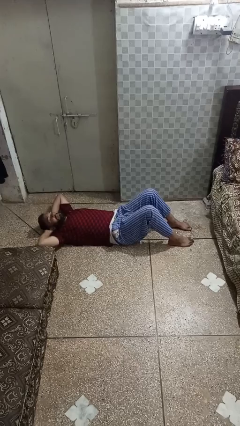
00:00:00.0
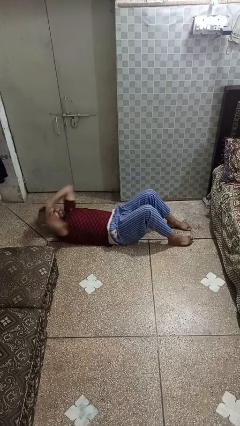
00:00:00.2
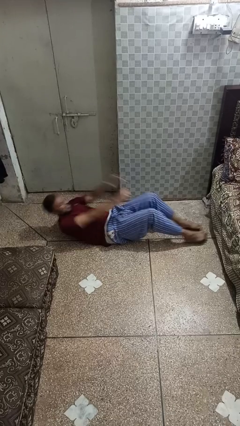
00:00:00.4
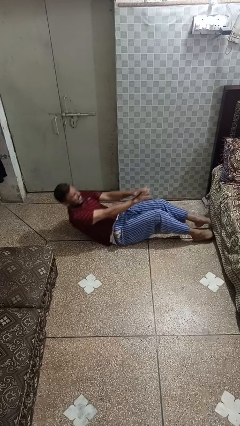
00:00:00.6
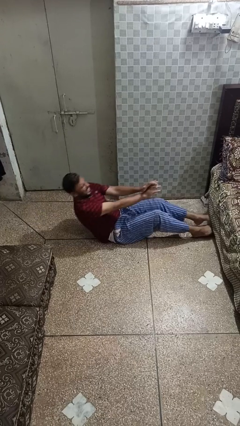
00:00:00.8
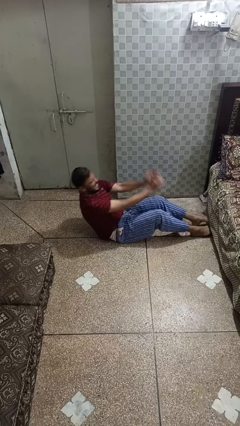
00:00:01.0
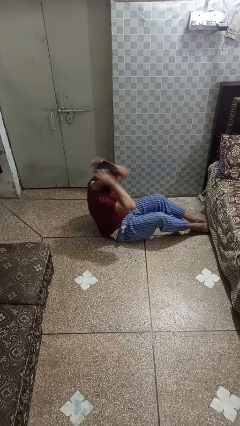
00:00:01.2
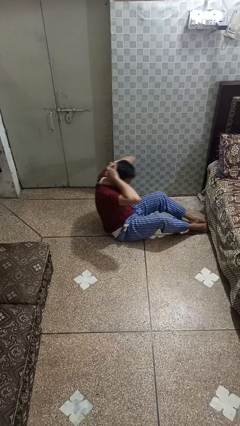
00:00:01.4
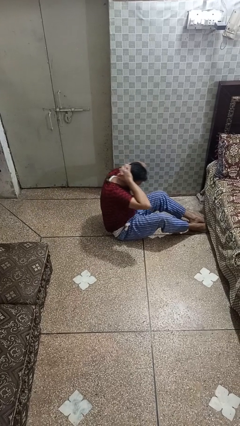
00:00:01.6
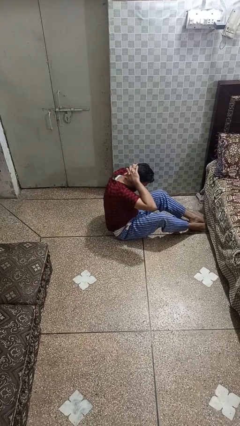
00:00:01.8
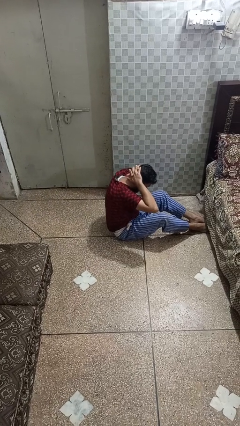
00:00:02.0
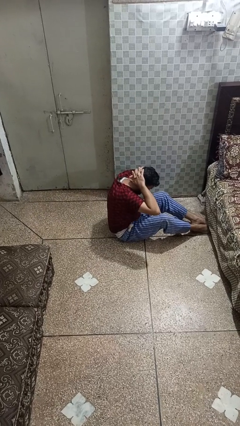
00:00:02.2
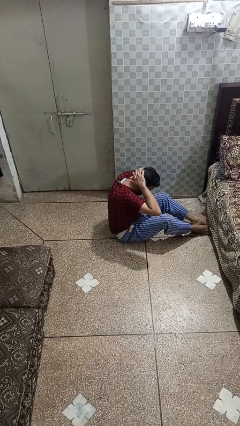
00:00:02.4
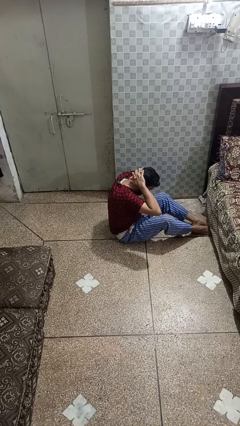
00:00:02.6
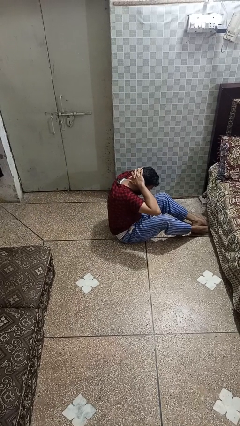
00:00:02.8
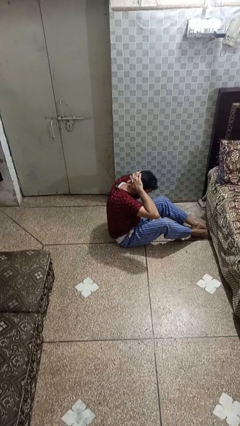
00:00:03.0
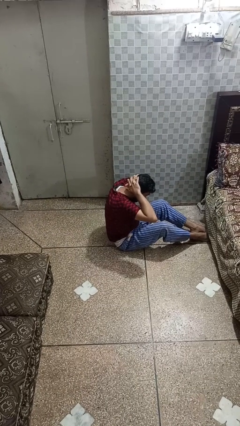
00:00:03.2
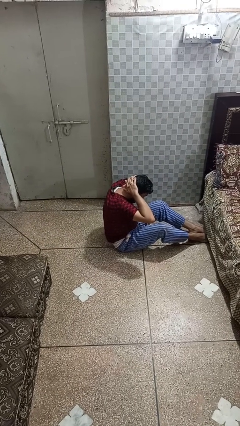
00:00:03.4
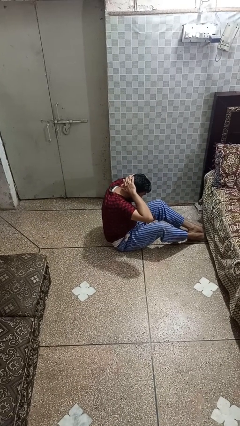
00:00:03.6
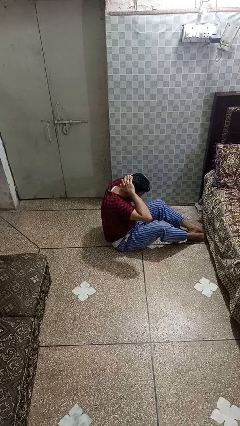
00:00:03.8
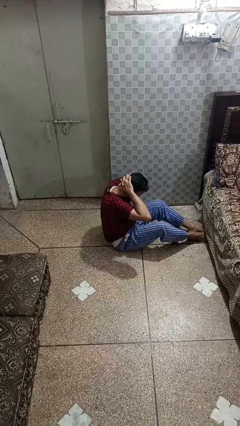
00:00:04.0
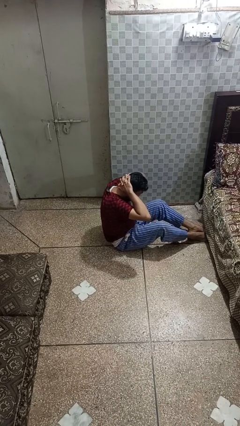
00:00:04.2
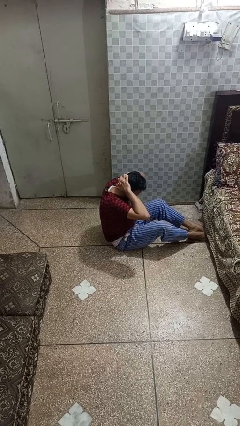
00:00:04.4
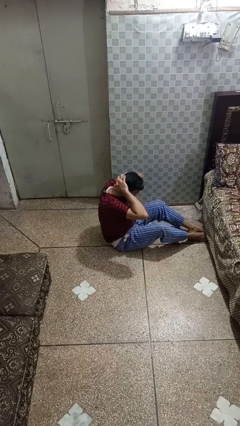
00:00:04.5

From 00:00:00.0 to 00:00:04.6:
person exercises with situp

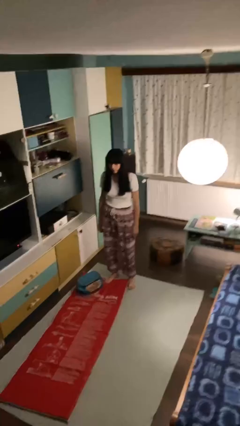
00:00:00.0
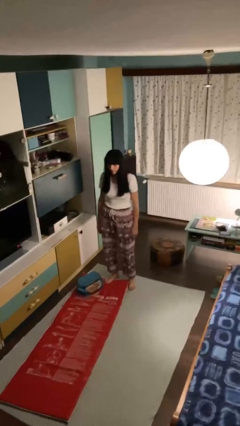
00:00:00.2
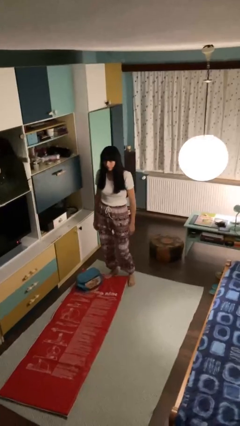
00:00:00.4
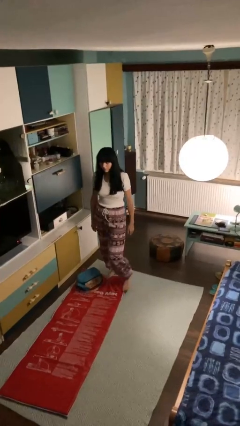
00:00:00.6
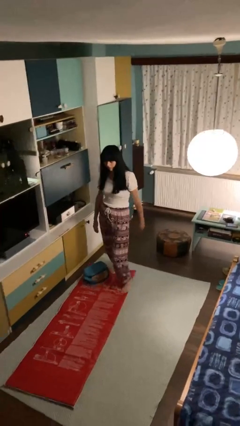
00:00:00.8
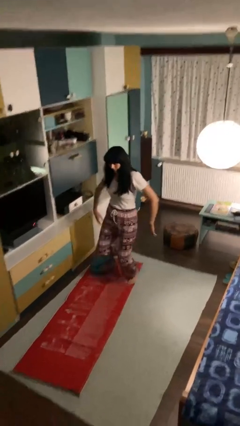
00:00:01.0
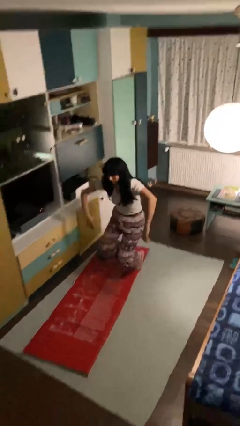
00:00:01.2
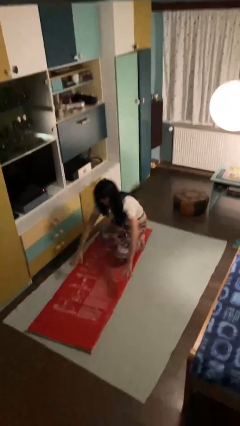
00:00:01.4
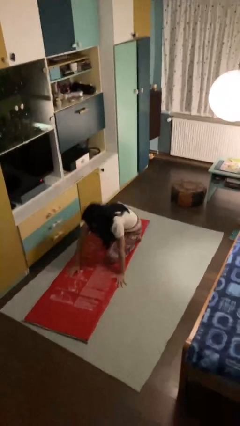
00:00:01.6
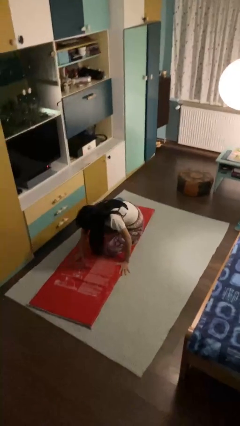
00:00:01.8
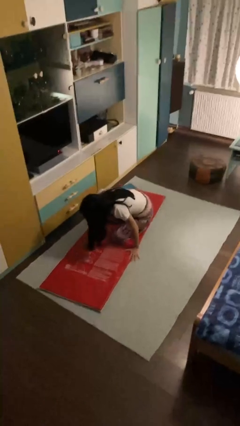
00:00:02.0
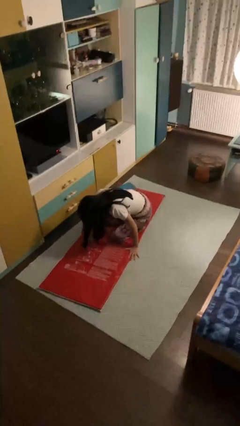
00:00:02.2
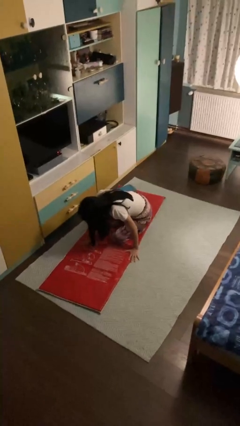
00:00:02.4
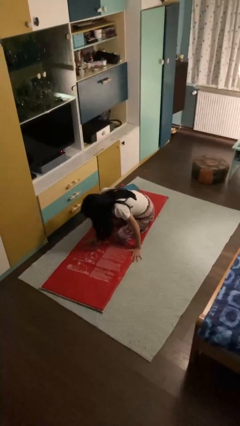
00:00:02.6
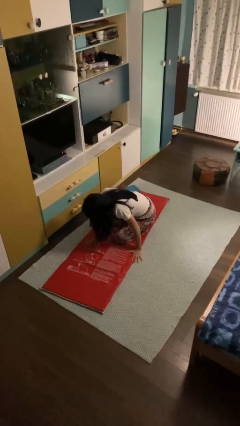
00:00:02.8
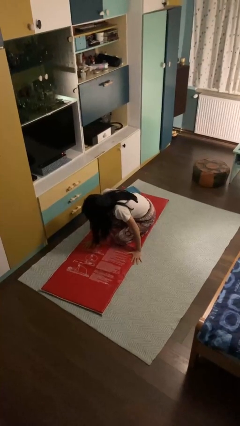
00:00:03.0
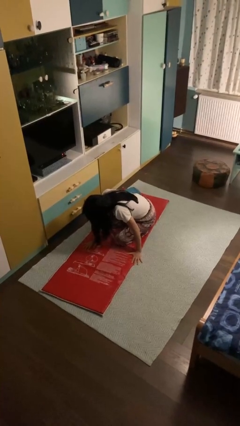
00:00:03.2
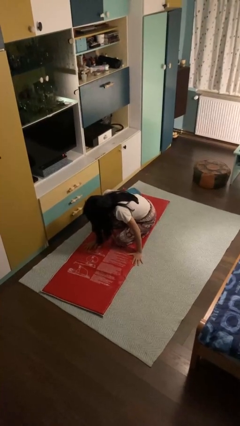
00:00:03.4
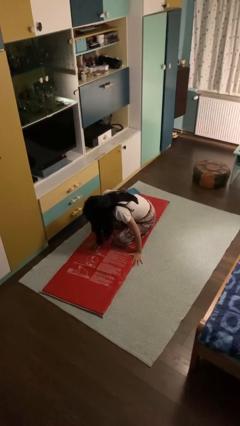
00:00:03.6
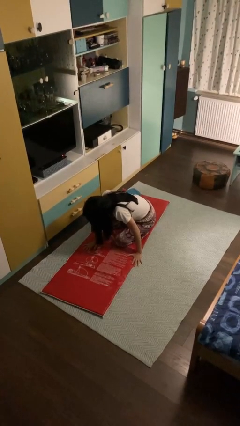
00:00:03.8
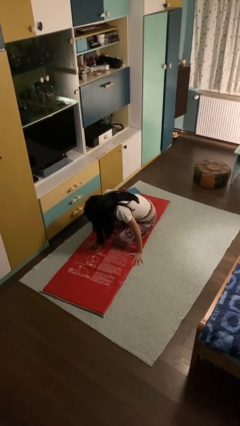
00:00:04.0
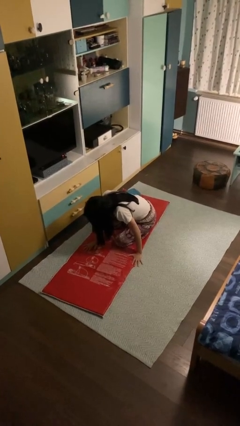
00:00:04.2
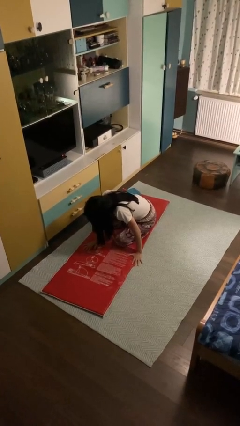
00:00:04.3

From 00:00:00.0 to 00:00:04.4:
person trips on object on floor

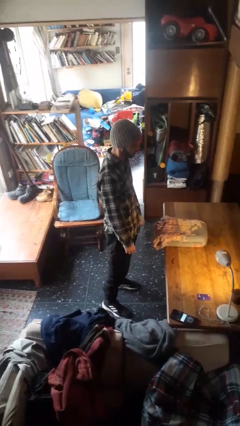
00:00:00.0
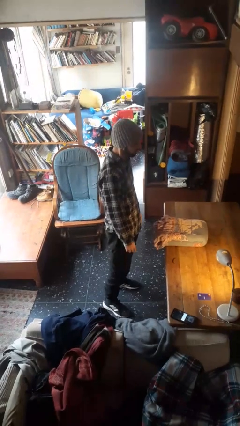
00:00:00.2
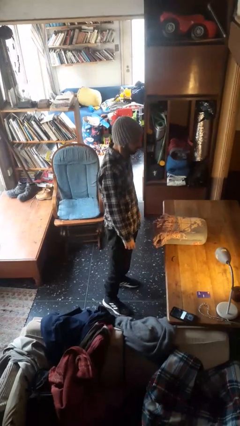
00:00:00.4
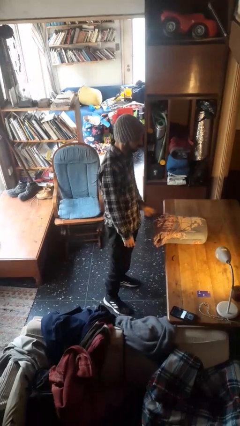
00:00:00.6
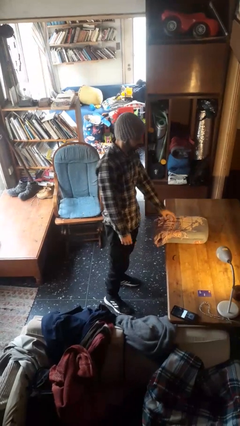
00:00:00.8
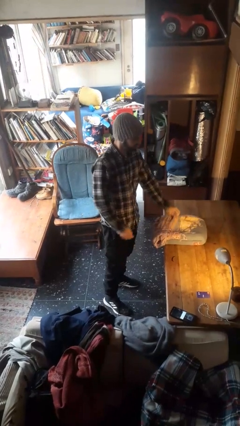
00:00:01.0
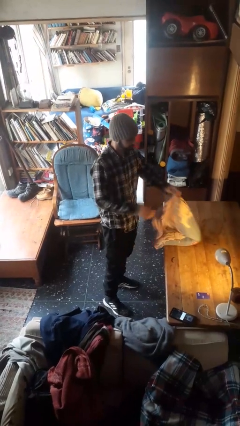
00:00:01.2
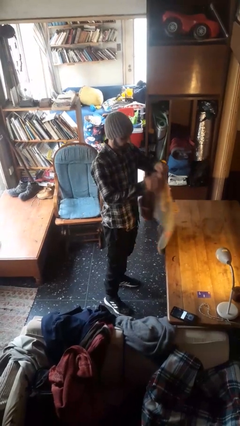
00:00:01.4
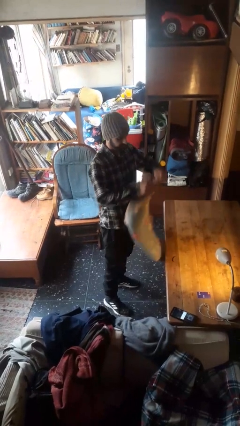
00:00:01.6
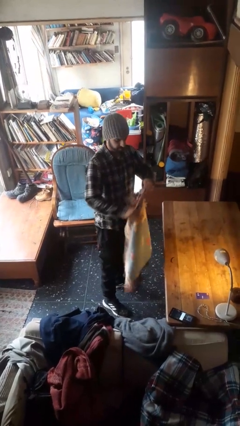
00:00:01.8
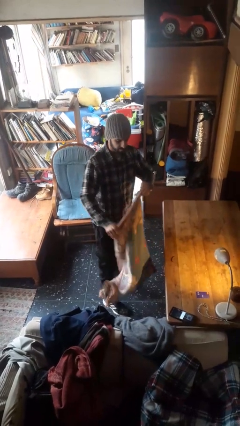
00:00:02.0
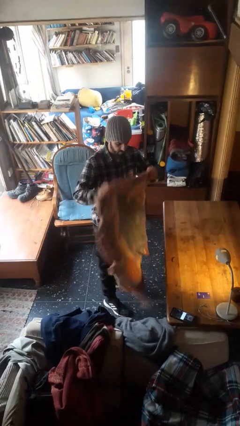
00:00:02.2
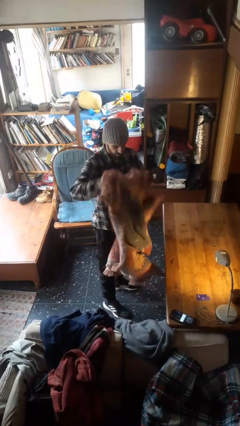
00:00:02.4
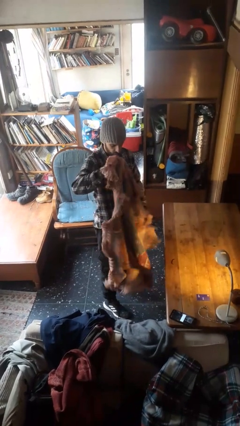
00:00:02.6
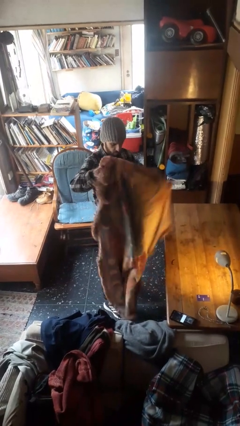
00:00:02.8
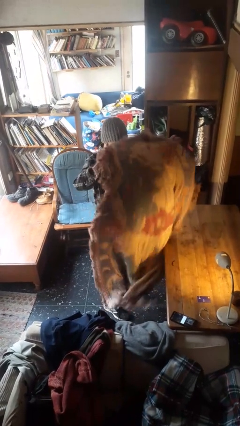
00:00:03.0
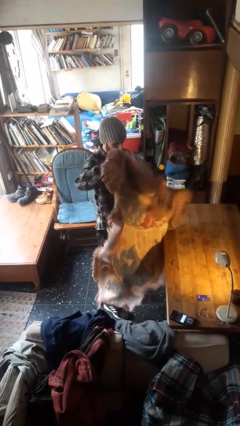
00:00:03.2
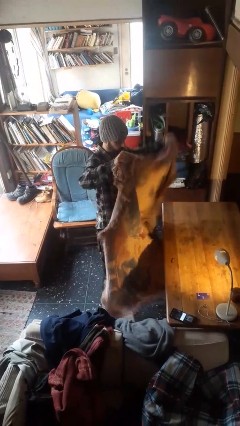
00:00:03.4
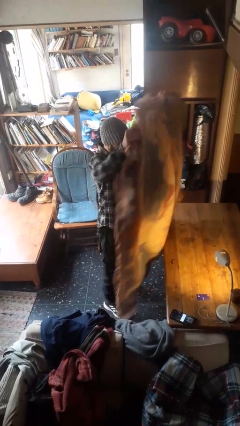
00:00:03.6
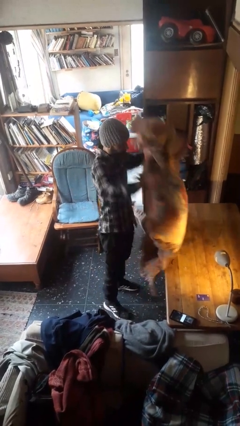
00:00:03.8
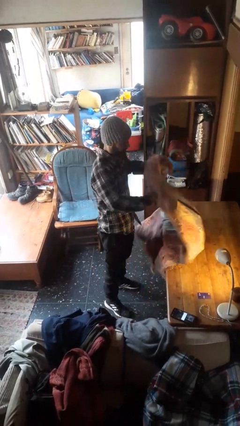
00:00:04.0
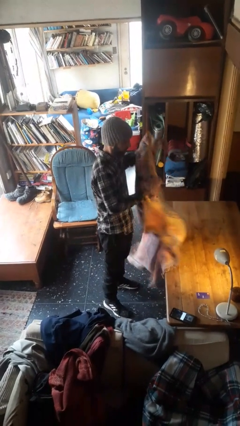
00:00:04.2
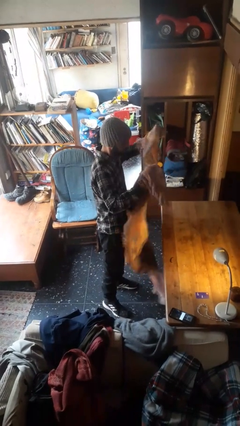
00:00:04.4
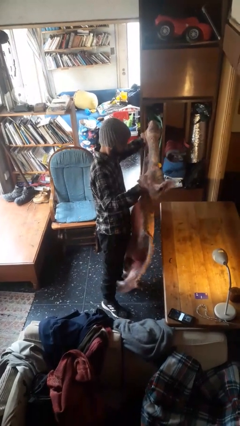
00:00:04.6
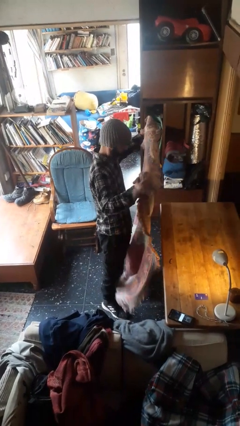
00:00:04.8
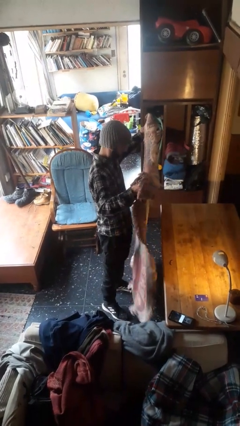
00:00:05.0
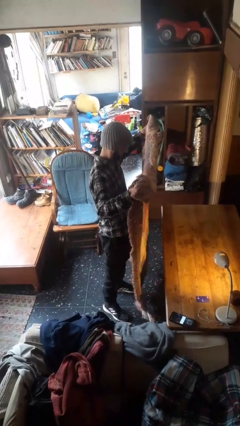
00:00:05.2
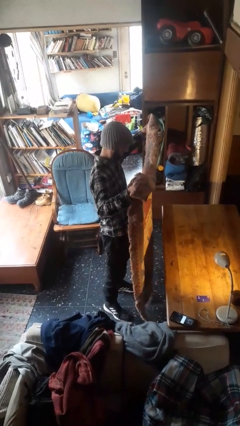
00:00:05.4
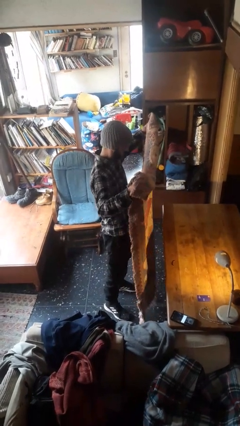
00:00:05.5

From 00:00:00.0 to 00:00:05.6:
person unfolds blanket

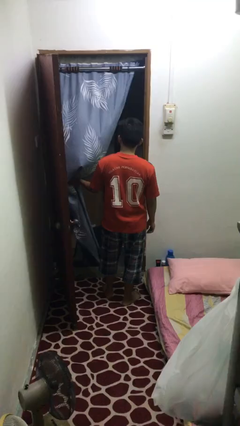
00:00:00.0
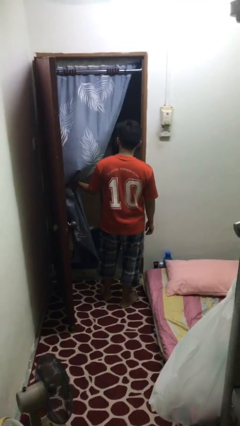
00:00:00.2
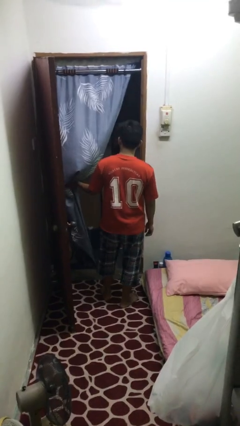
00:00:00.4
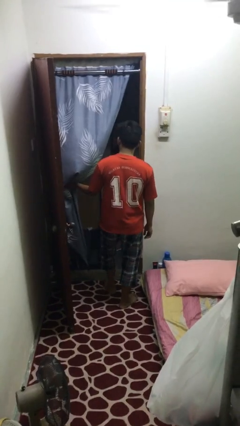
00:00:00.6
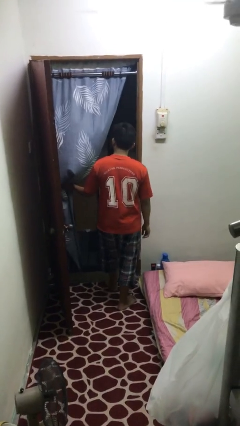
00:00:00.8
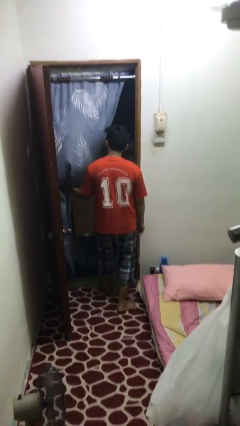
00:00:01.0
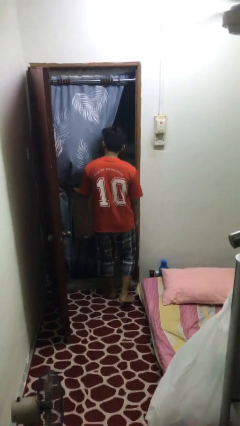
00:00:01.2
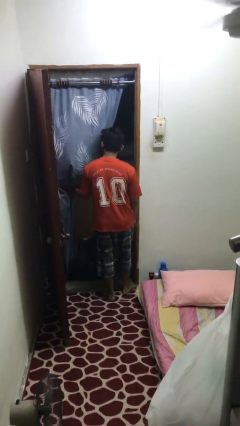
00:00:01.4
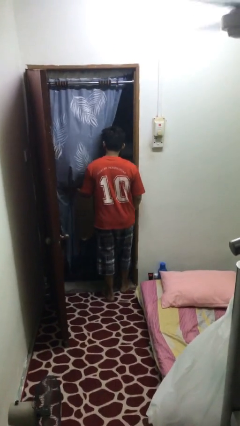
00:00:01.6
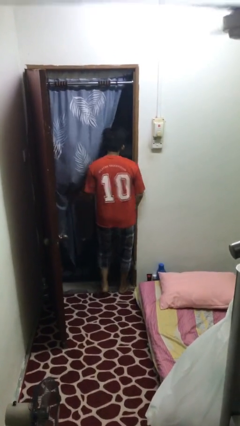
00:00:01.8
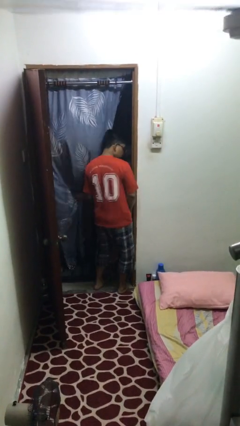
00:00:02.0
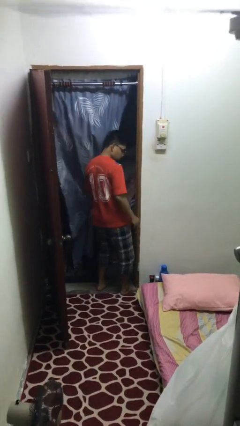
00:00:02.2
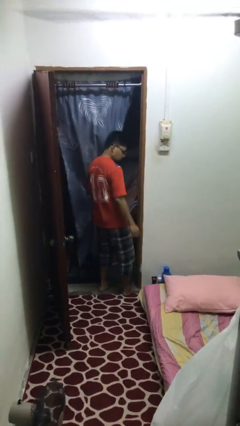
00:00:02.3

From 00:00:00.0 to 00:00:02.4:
person bumps into wall

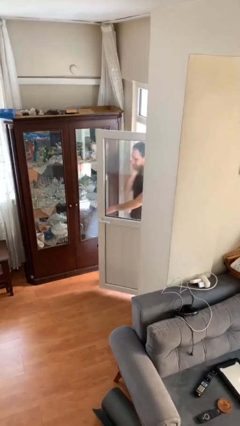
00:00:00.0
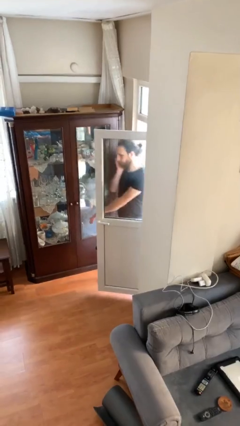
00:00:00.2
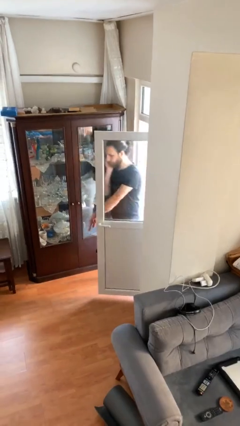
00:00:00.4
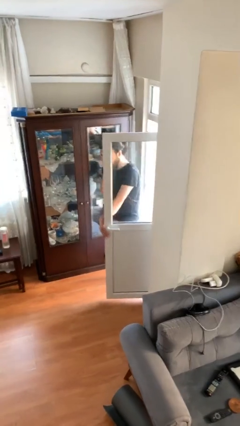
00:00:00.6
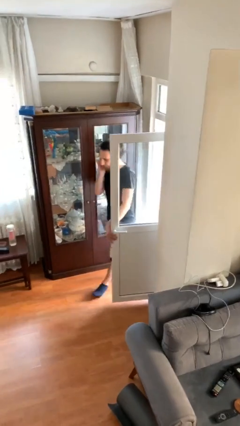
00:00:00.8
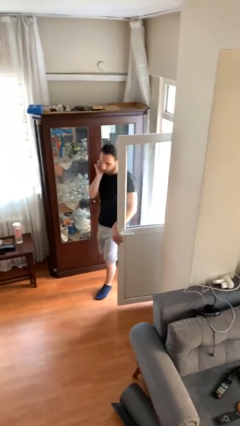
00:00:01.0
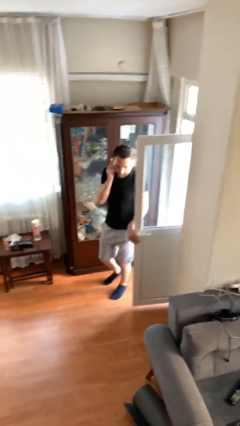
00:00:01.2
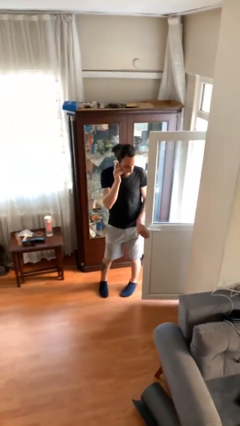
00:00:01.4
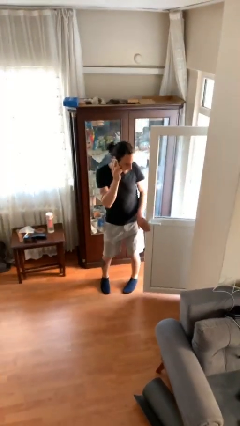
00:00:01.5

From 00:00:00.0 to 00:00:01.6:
person enters scene through structure
